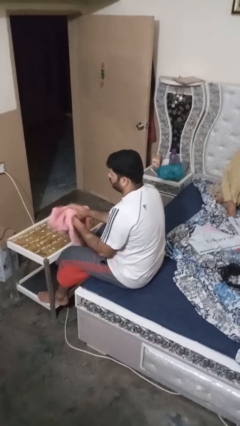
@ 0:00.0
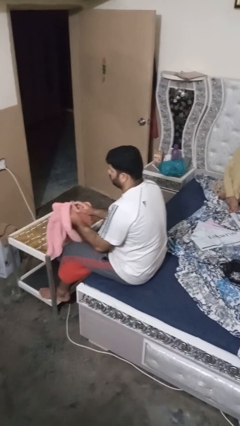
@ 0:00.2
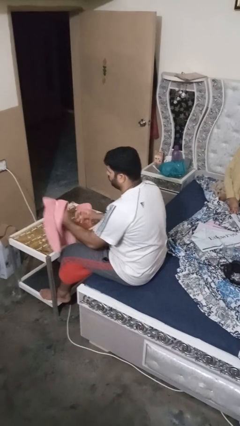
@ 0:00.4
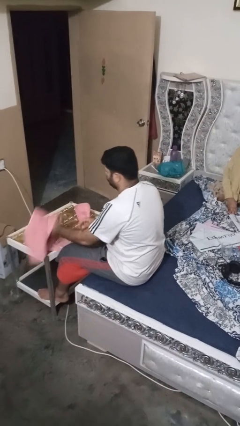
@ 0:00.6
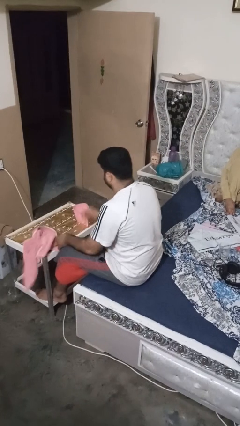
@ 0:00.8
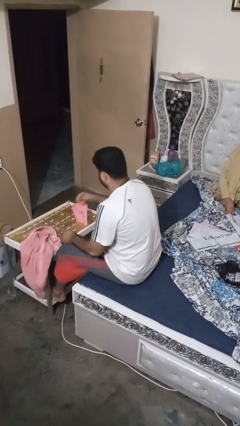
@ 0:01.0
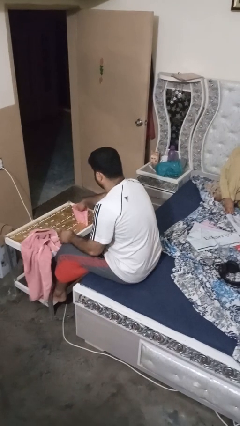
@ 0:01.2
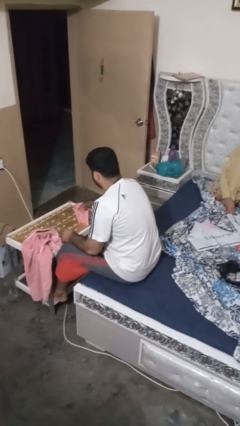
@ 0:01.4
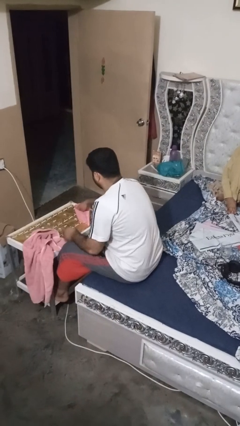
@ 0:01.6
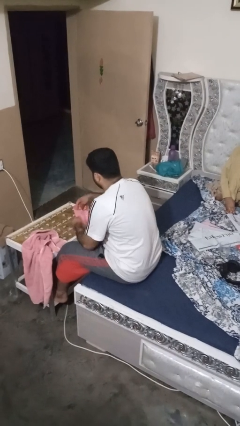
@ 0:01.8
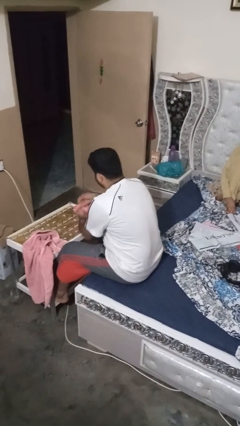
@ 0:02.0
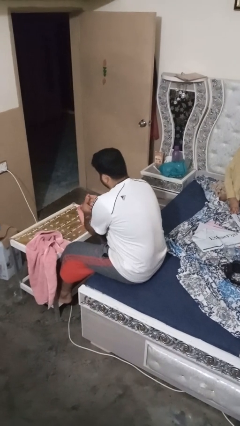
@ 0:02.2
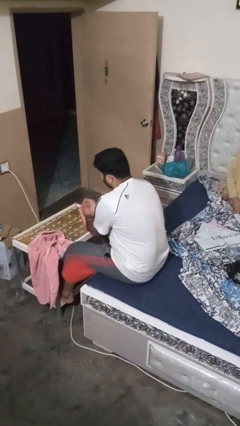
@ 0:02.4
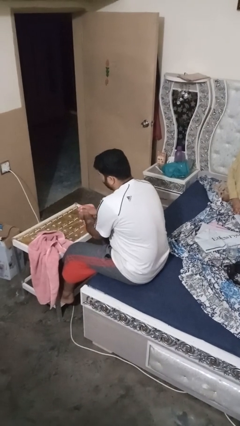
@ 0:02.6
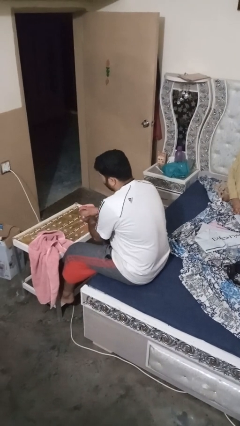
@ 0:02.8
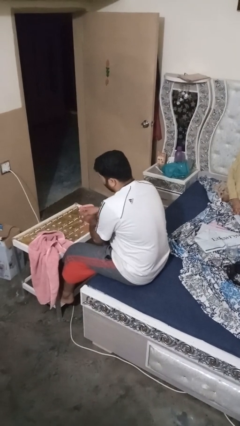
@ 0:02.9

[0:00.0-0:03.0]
person washes hands

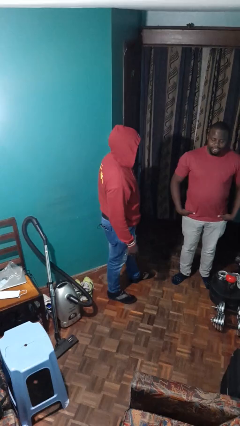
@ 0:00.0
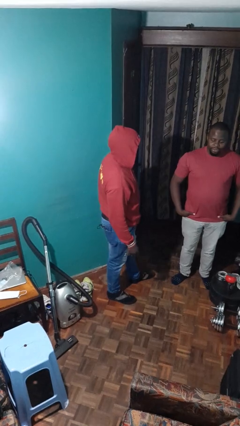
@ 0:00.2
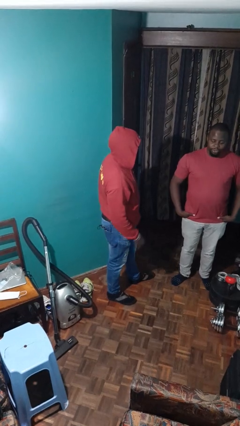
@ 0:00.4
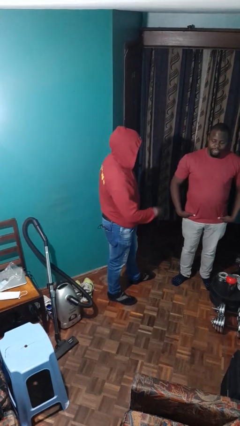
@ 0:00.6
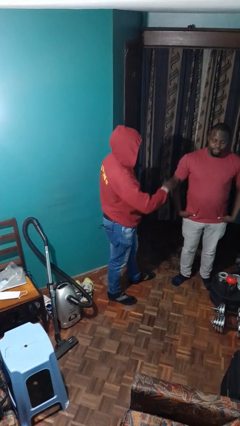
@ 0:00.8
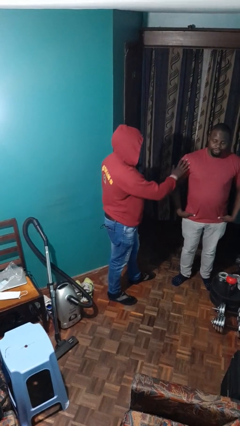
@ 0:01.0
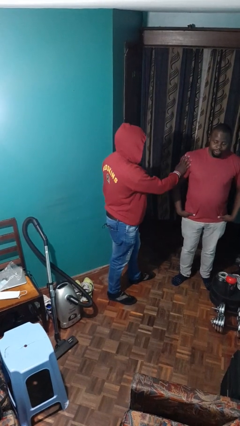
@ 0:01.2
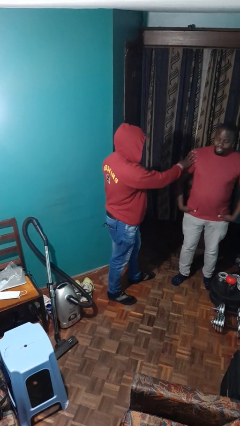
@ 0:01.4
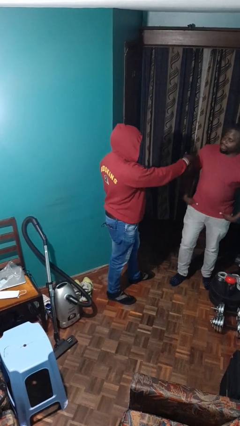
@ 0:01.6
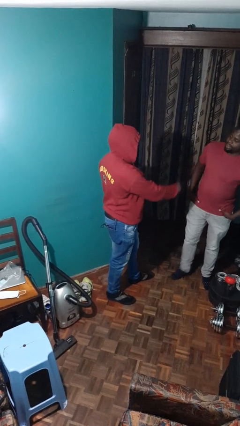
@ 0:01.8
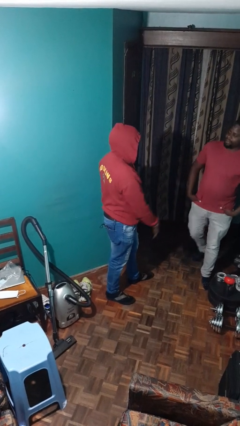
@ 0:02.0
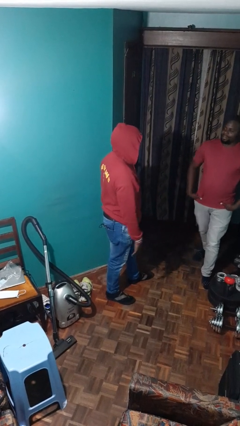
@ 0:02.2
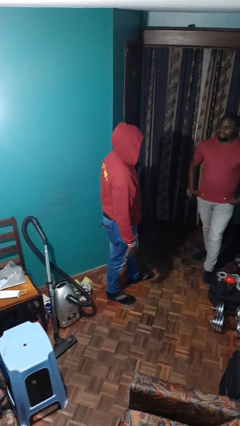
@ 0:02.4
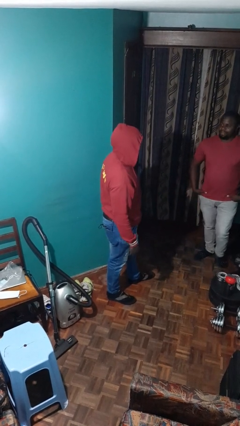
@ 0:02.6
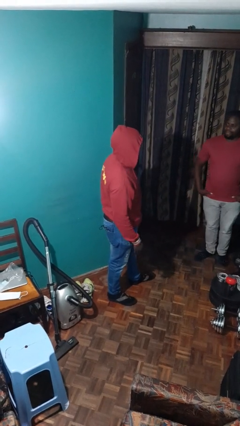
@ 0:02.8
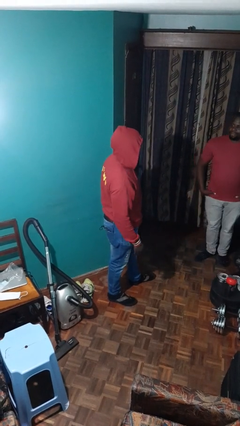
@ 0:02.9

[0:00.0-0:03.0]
person shoves person

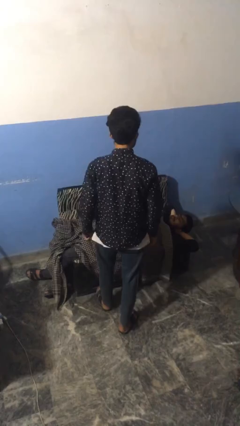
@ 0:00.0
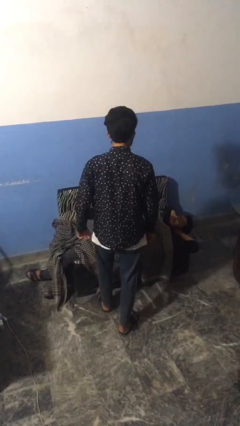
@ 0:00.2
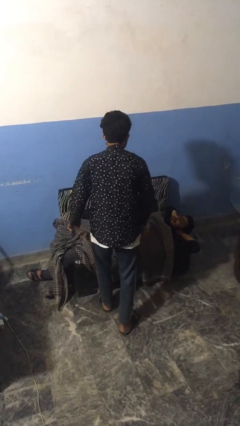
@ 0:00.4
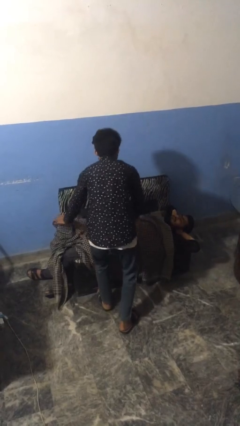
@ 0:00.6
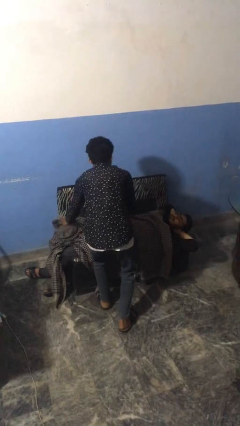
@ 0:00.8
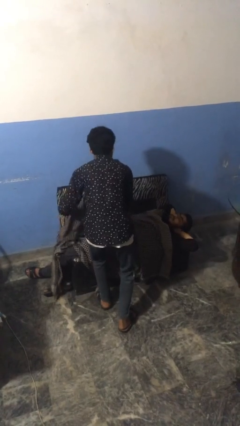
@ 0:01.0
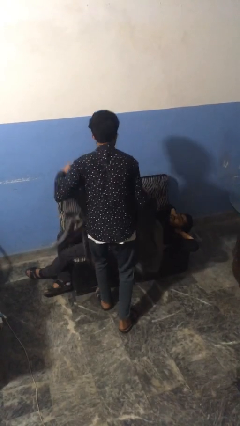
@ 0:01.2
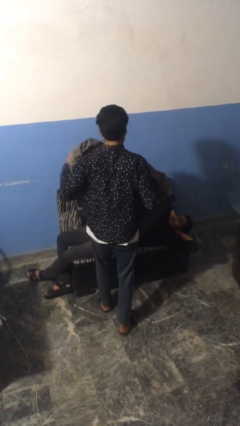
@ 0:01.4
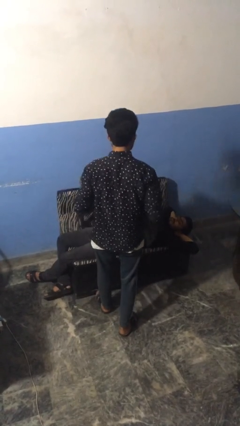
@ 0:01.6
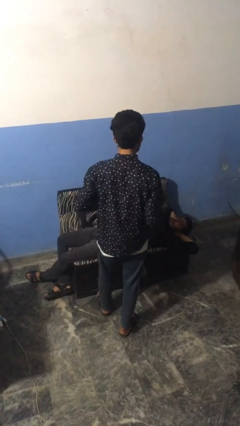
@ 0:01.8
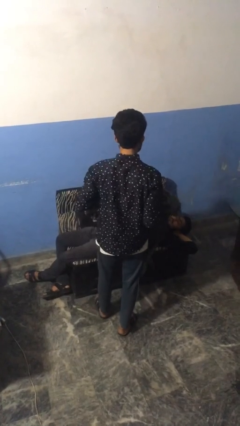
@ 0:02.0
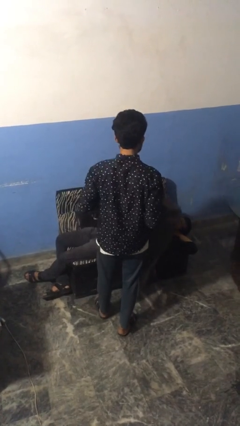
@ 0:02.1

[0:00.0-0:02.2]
person uncovers friend with blanket

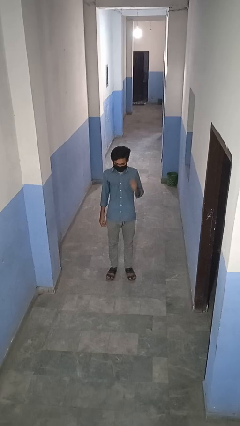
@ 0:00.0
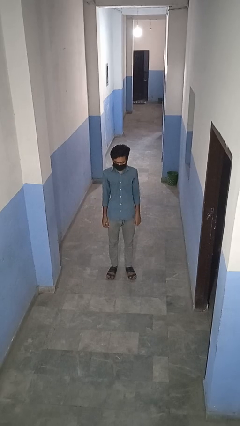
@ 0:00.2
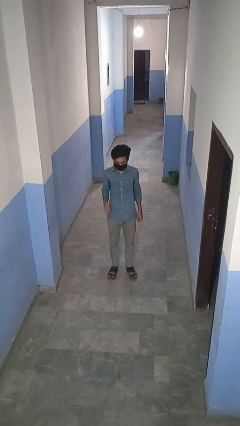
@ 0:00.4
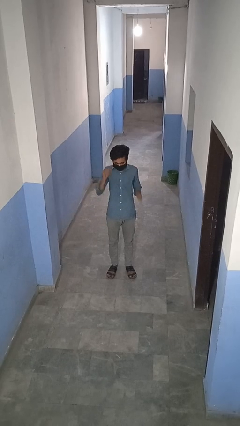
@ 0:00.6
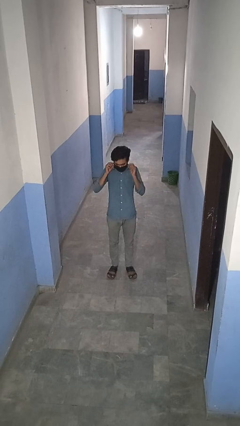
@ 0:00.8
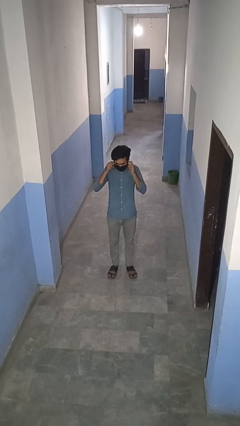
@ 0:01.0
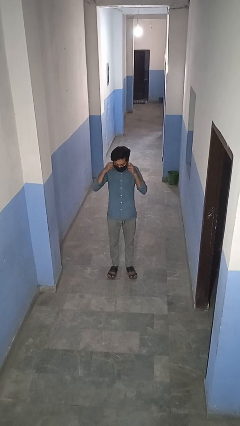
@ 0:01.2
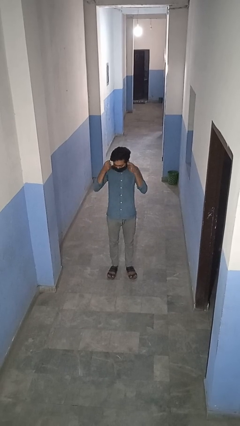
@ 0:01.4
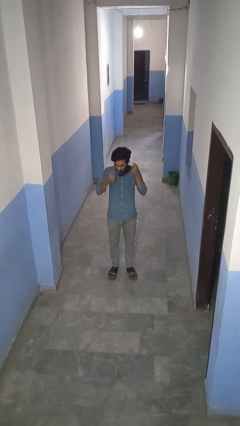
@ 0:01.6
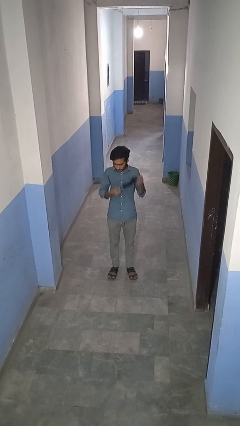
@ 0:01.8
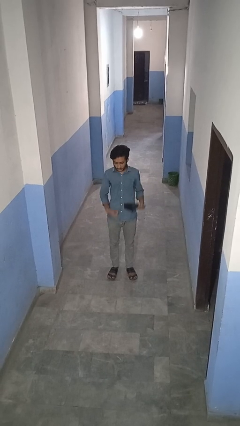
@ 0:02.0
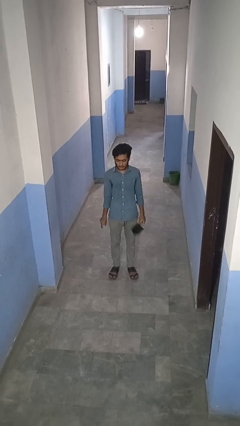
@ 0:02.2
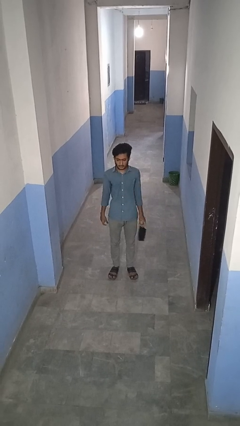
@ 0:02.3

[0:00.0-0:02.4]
person takes off facemask

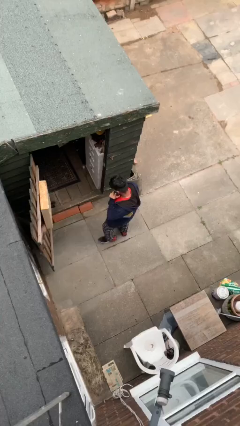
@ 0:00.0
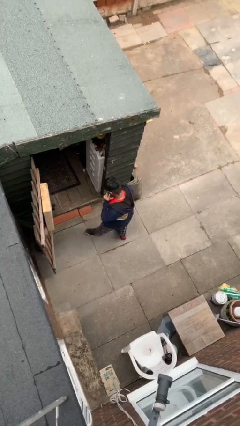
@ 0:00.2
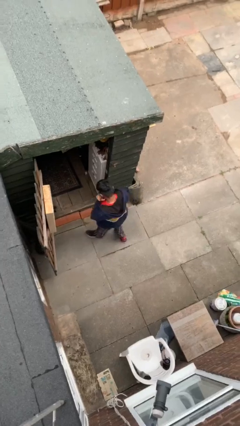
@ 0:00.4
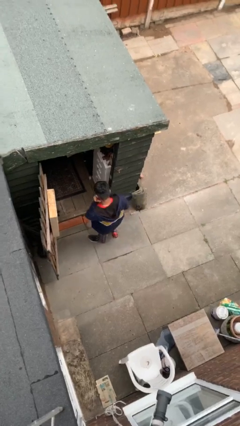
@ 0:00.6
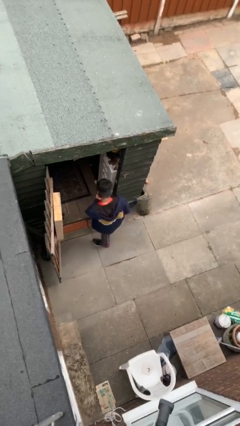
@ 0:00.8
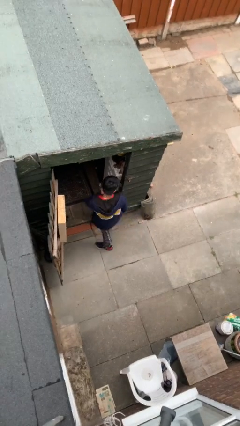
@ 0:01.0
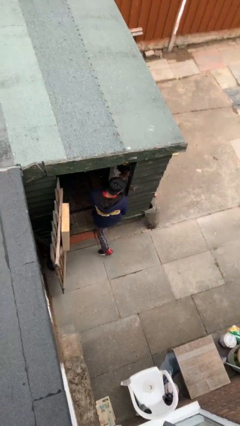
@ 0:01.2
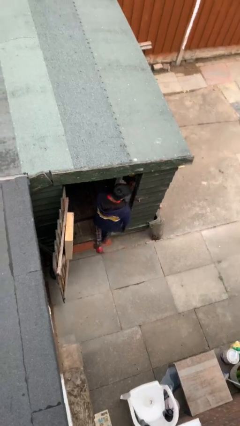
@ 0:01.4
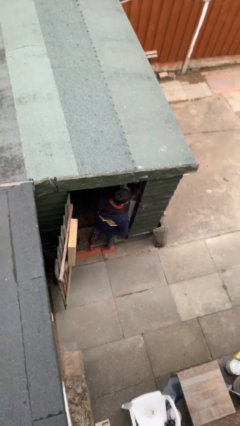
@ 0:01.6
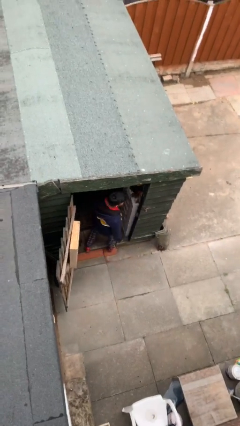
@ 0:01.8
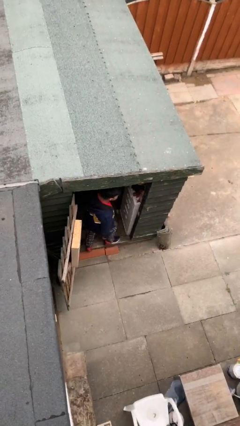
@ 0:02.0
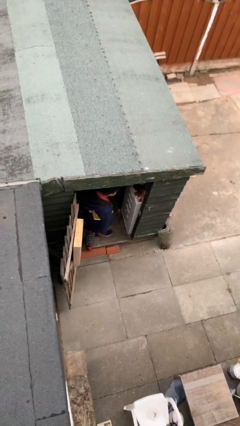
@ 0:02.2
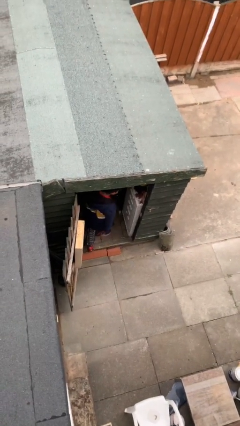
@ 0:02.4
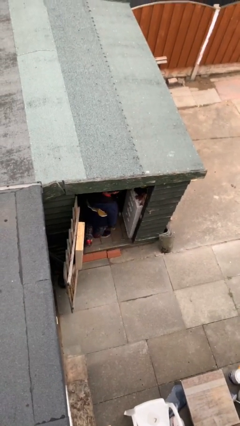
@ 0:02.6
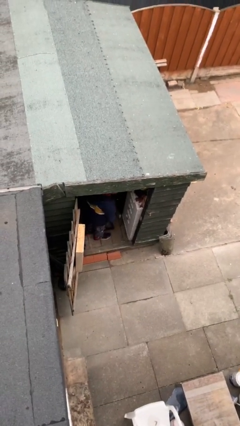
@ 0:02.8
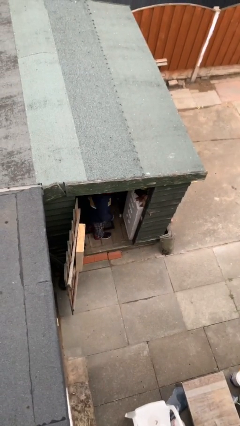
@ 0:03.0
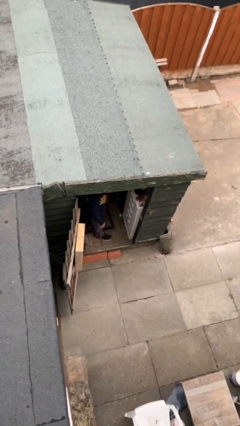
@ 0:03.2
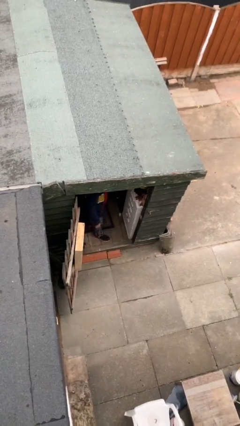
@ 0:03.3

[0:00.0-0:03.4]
person exits scene through structure

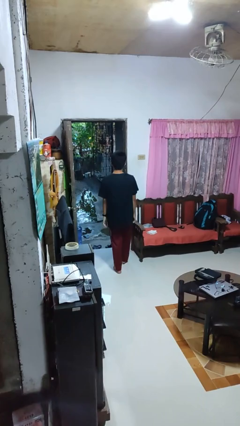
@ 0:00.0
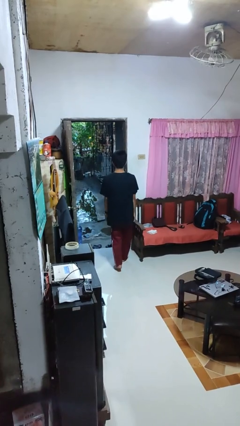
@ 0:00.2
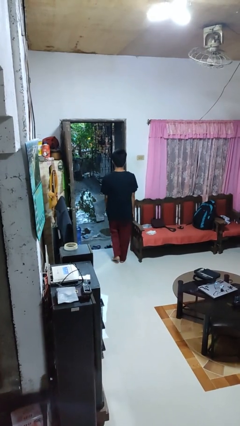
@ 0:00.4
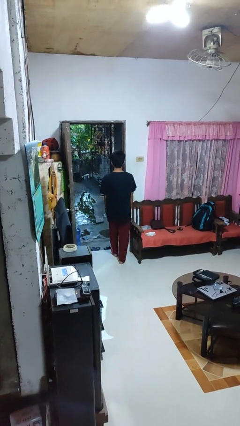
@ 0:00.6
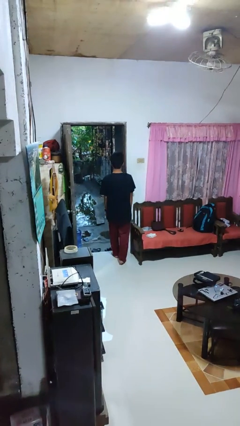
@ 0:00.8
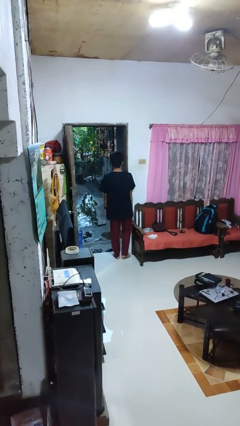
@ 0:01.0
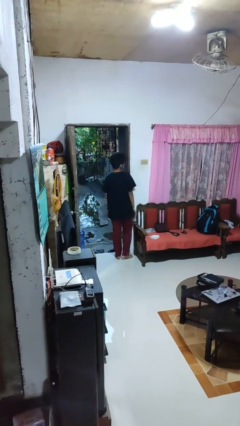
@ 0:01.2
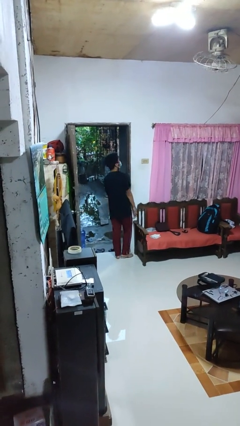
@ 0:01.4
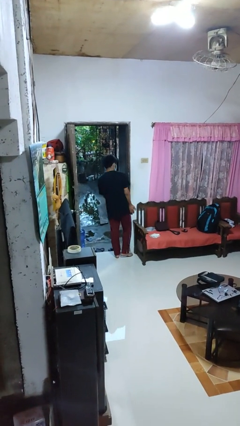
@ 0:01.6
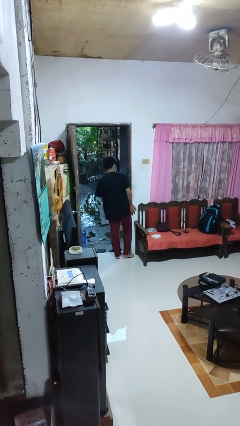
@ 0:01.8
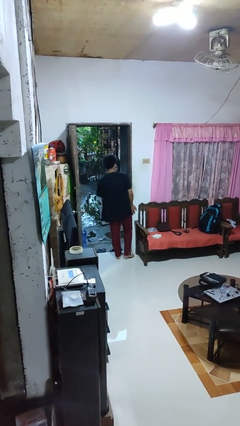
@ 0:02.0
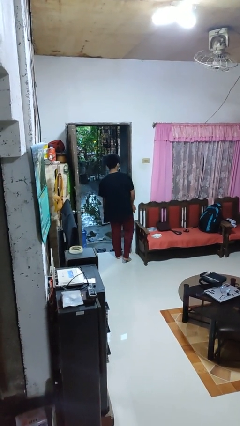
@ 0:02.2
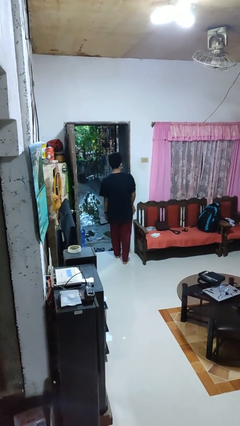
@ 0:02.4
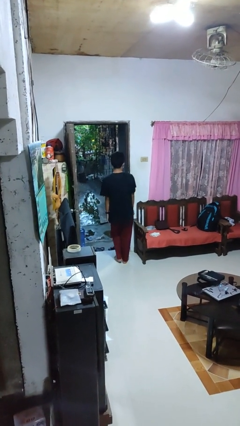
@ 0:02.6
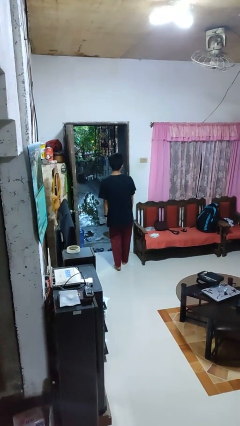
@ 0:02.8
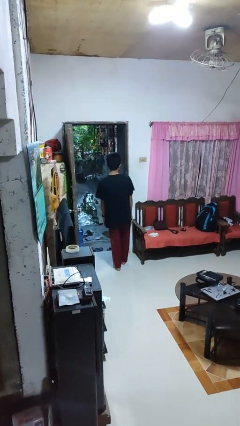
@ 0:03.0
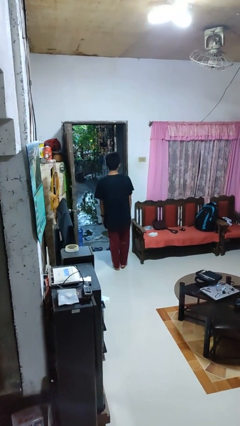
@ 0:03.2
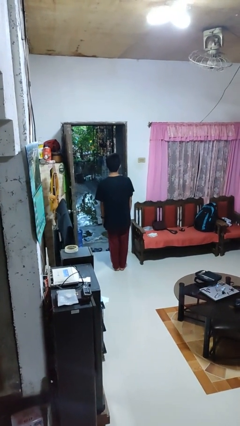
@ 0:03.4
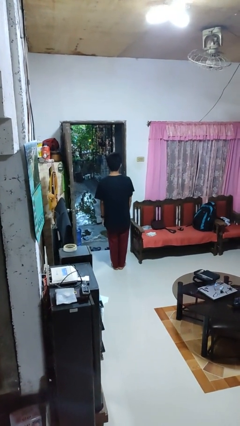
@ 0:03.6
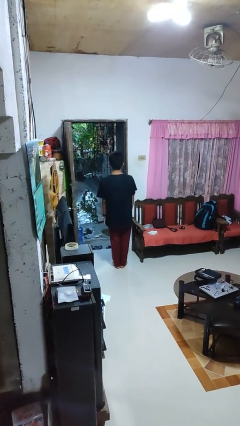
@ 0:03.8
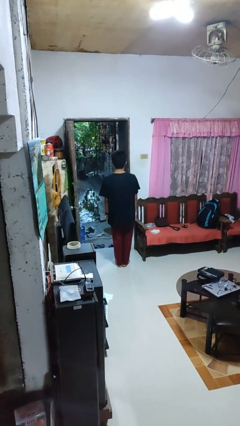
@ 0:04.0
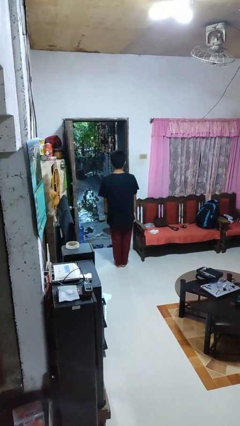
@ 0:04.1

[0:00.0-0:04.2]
person bumps into wall
